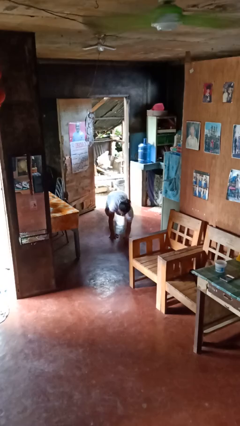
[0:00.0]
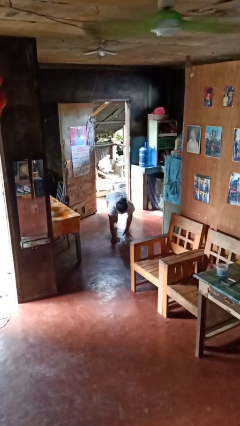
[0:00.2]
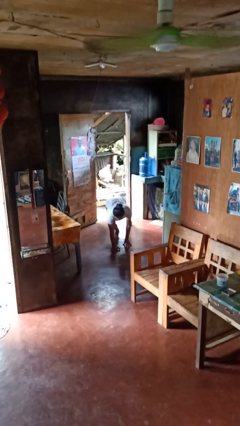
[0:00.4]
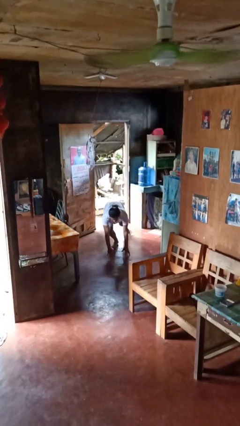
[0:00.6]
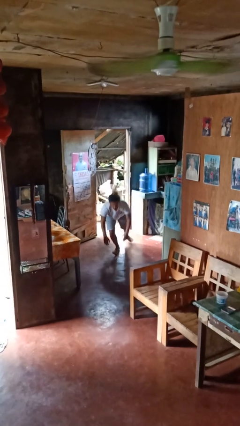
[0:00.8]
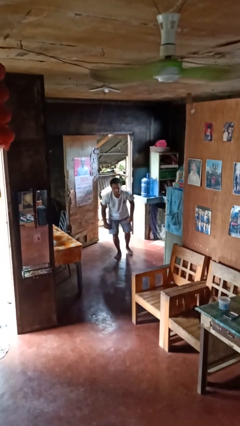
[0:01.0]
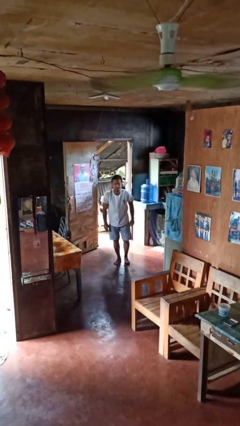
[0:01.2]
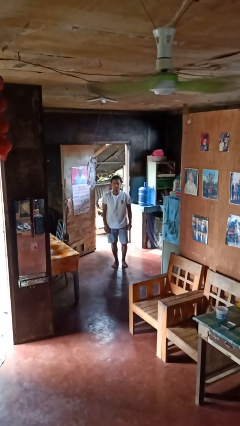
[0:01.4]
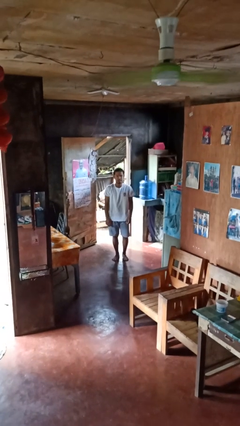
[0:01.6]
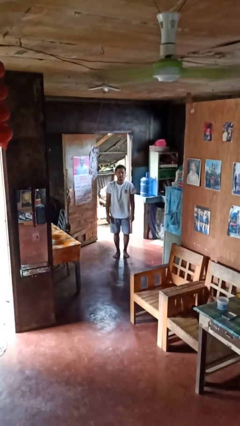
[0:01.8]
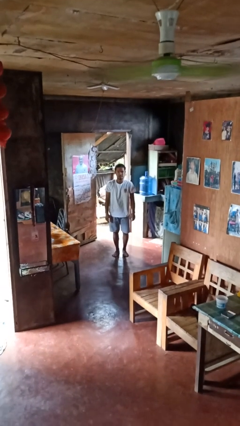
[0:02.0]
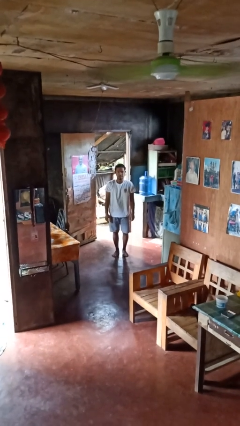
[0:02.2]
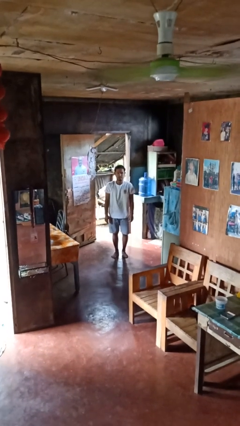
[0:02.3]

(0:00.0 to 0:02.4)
person stands up from floor

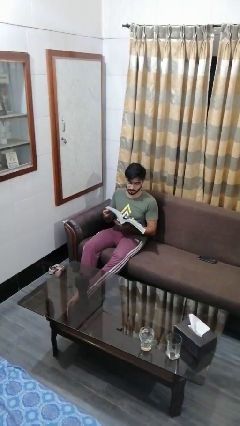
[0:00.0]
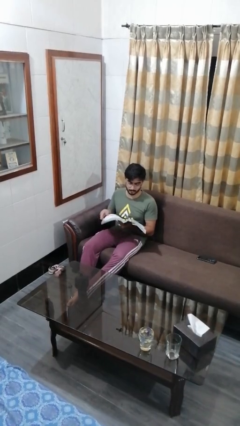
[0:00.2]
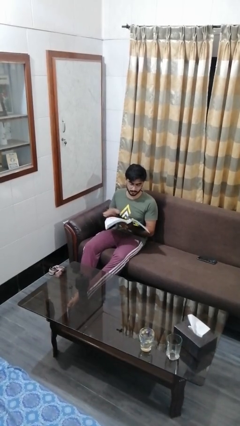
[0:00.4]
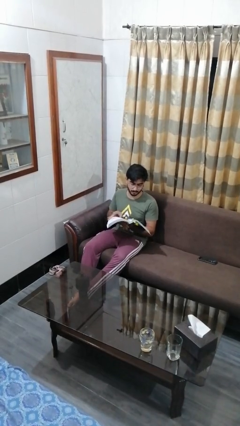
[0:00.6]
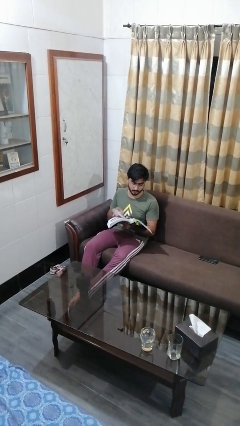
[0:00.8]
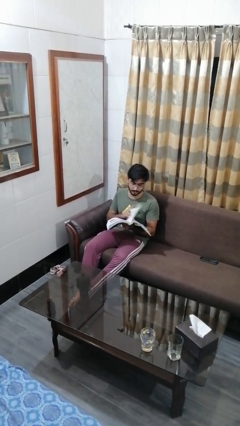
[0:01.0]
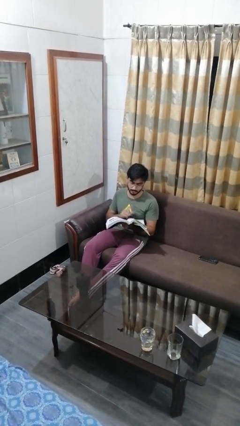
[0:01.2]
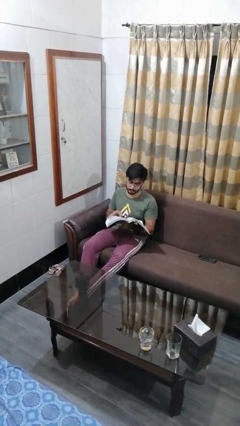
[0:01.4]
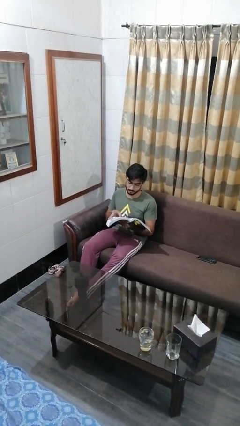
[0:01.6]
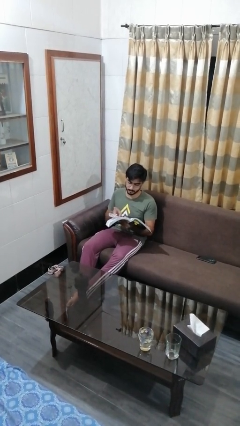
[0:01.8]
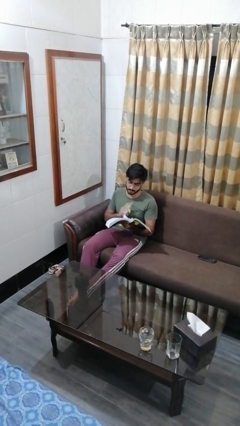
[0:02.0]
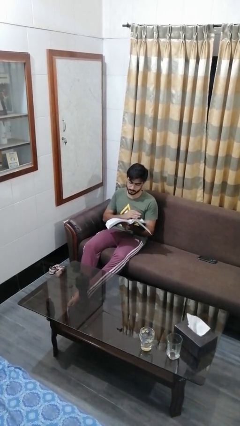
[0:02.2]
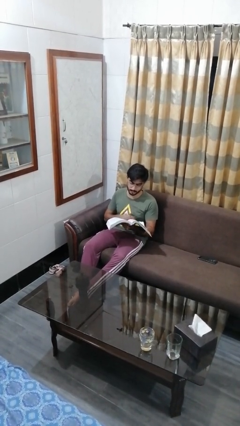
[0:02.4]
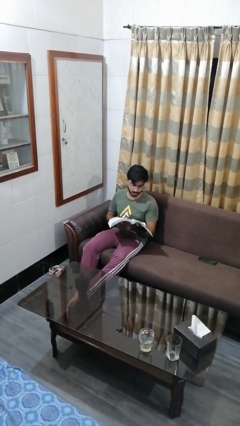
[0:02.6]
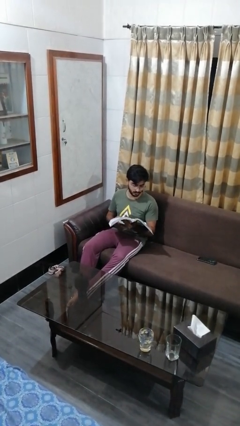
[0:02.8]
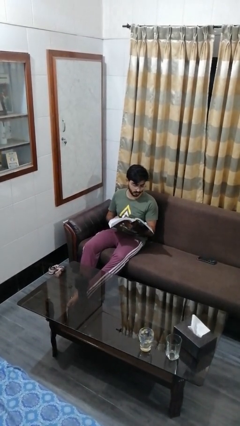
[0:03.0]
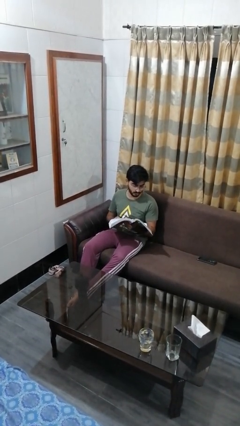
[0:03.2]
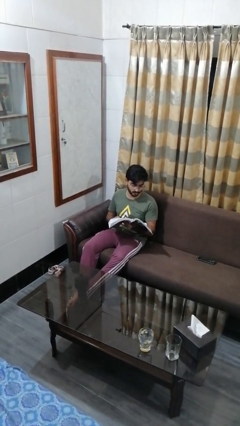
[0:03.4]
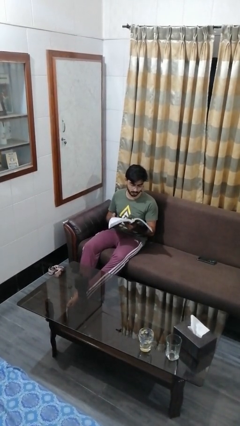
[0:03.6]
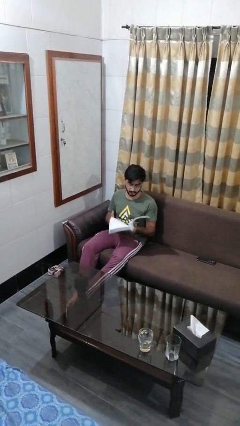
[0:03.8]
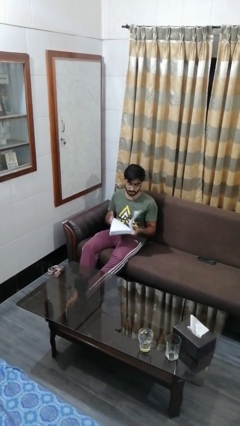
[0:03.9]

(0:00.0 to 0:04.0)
person reads book

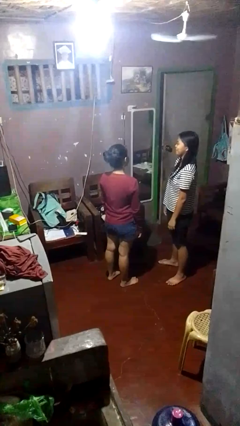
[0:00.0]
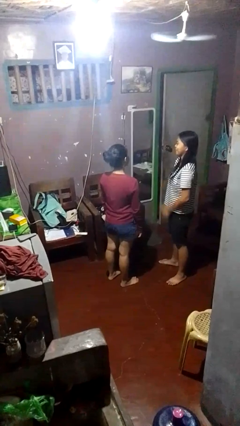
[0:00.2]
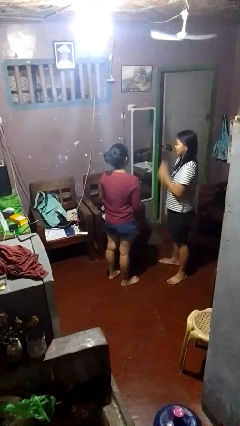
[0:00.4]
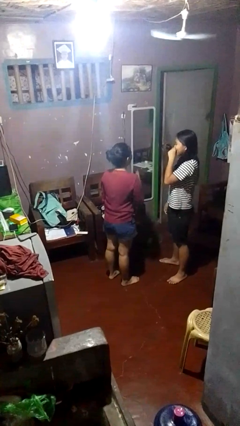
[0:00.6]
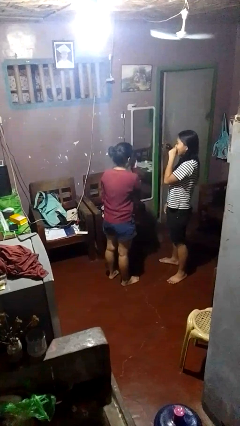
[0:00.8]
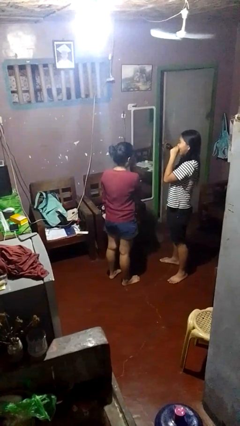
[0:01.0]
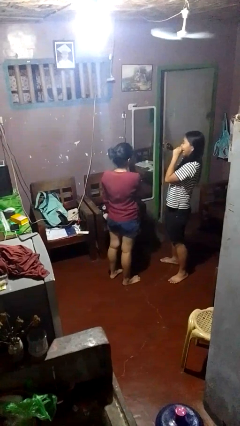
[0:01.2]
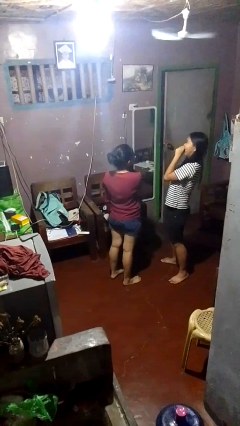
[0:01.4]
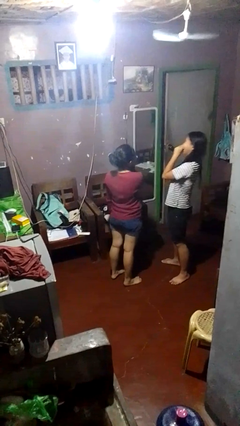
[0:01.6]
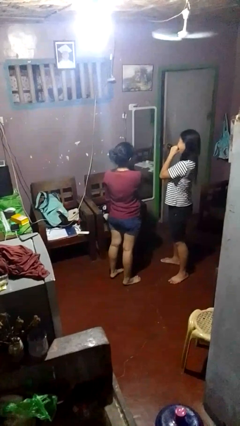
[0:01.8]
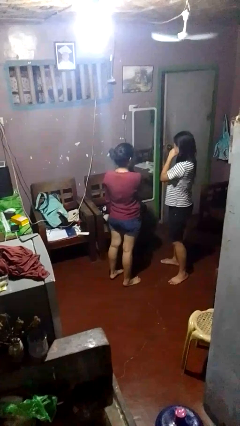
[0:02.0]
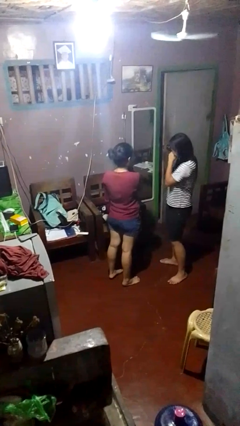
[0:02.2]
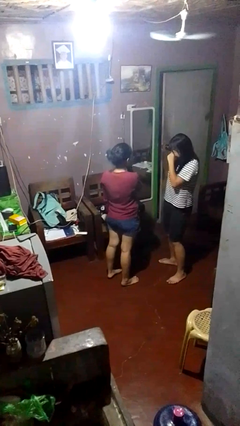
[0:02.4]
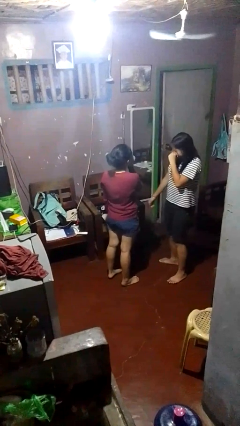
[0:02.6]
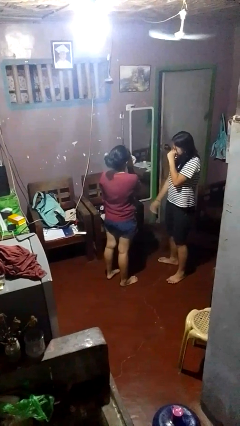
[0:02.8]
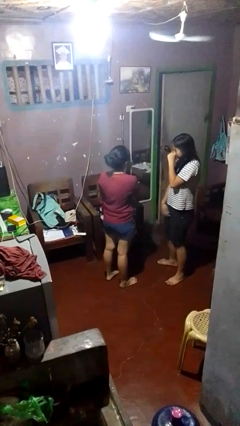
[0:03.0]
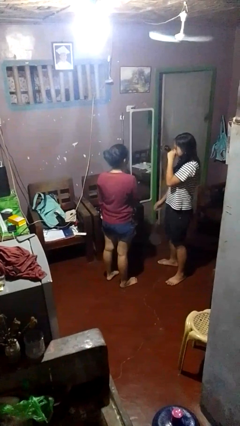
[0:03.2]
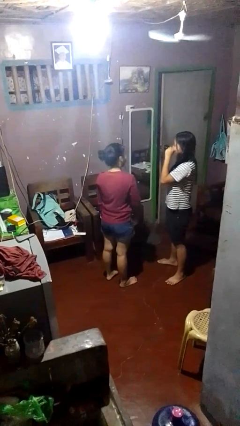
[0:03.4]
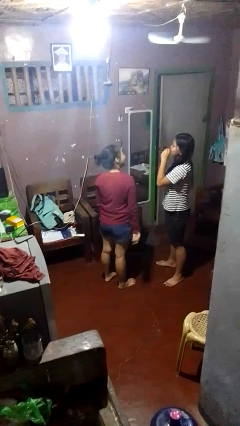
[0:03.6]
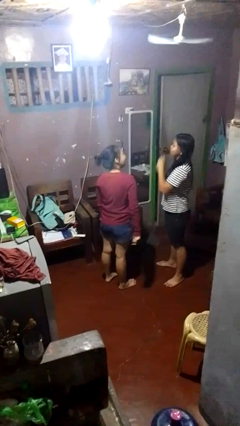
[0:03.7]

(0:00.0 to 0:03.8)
person laughs with person

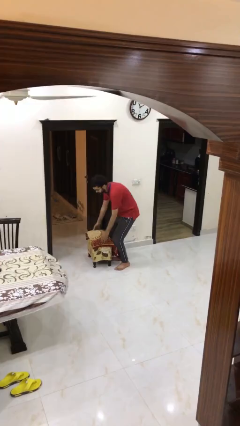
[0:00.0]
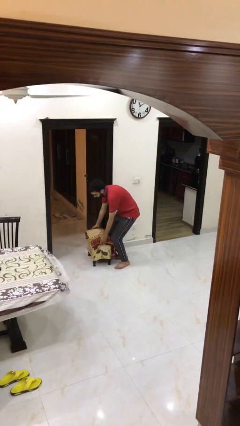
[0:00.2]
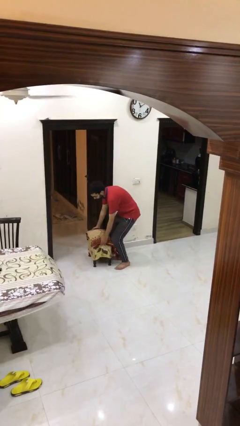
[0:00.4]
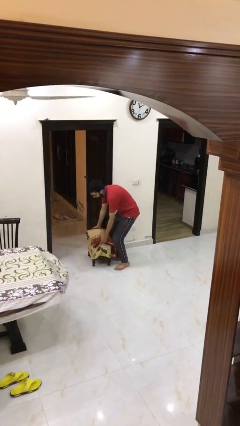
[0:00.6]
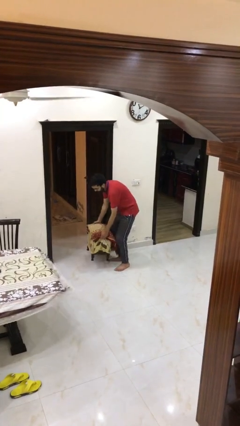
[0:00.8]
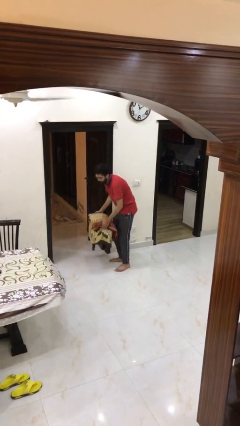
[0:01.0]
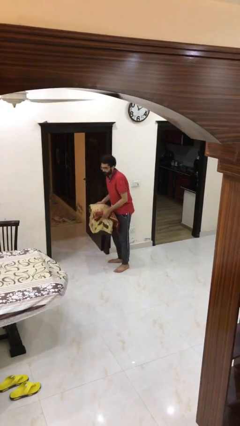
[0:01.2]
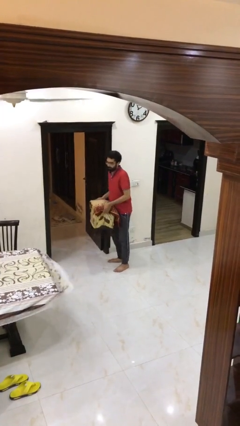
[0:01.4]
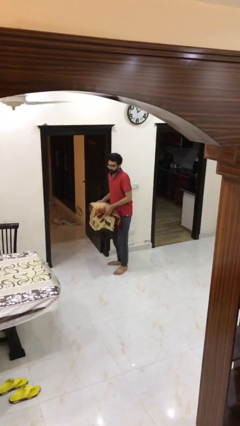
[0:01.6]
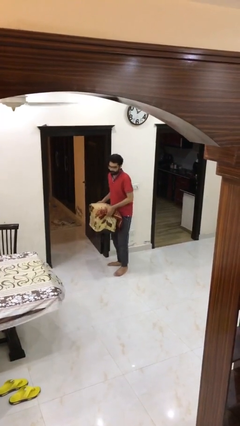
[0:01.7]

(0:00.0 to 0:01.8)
person picks up object from floor

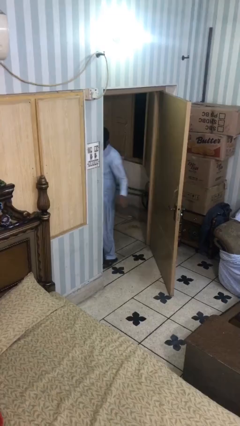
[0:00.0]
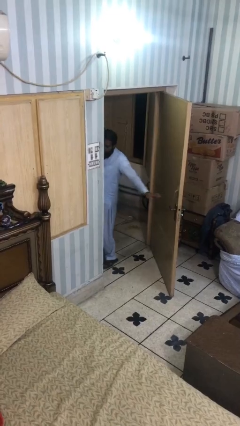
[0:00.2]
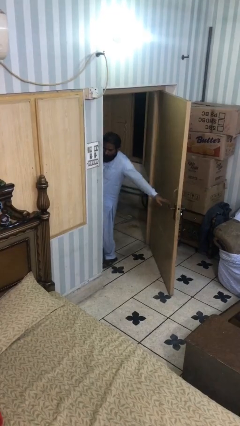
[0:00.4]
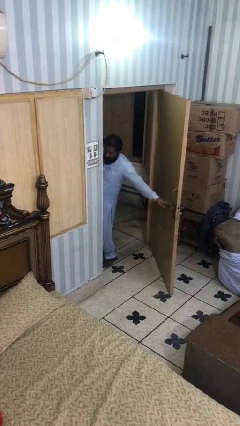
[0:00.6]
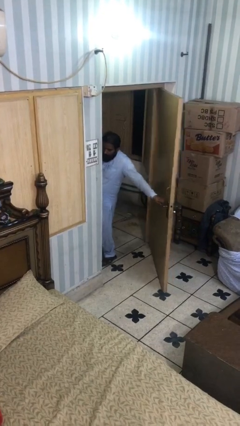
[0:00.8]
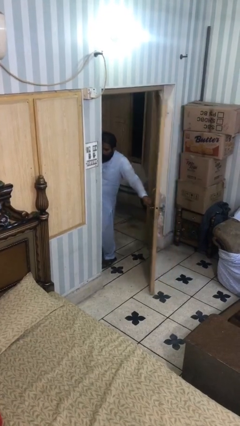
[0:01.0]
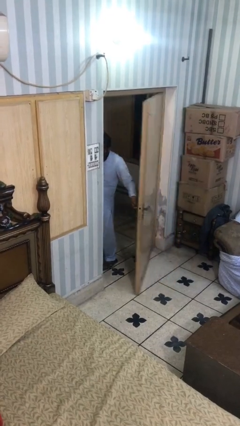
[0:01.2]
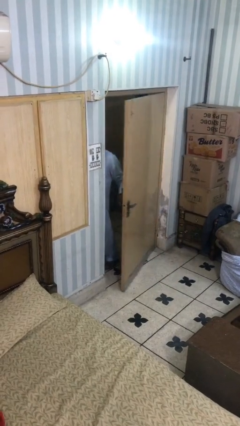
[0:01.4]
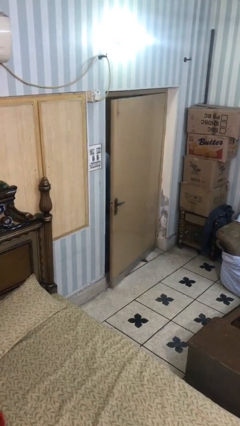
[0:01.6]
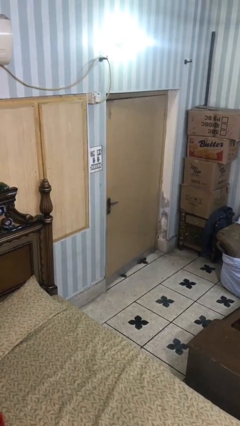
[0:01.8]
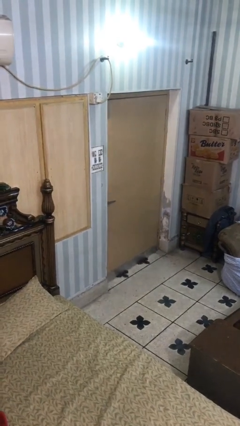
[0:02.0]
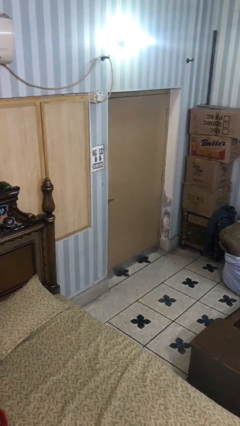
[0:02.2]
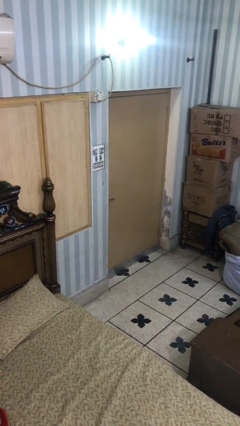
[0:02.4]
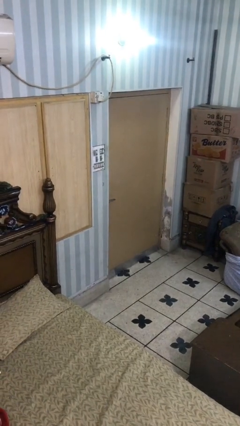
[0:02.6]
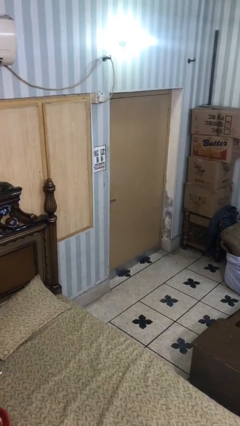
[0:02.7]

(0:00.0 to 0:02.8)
person closes facility door

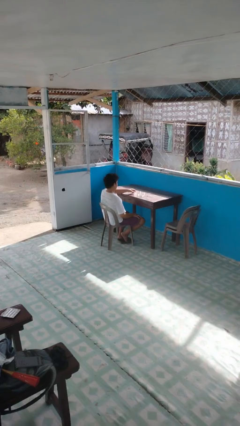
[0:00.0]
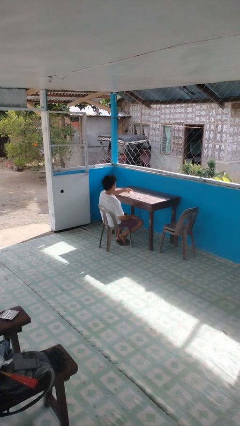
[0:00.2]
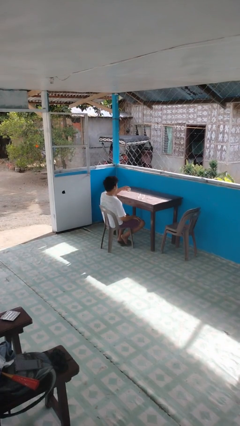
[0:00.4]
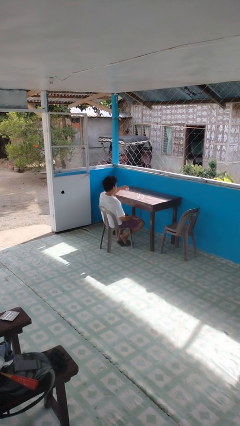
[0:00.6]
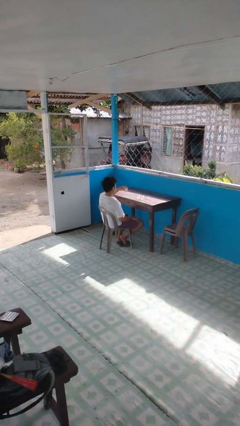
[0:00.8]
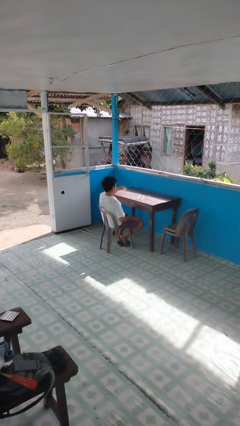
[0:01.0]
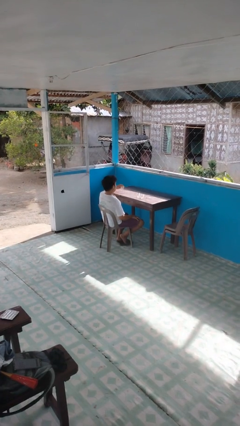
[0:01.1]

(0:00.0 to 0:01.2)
person picks up object from table

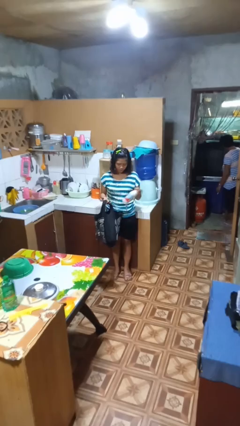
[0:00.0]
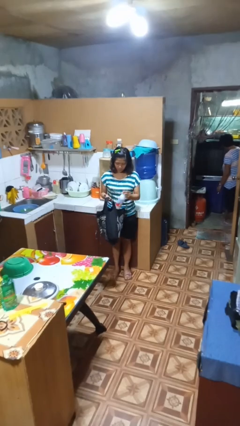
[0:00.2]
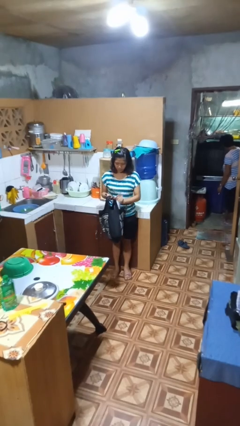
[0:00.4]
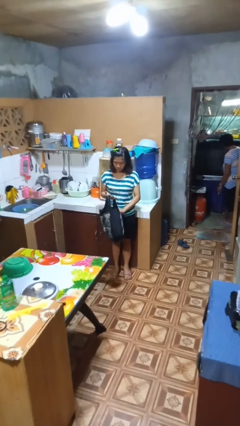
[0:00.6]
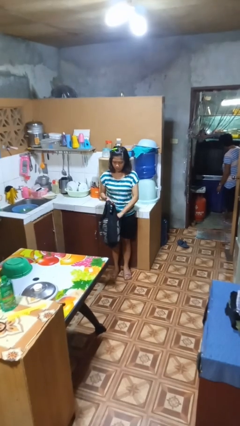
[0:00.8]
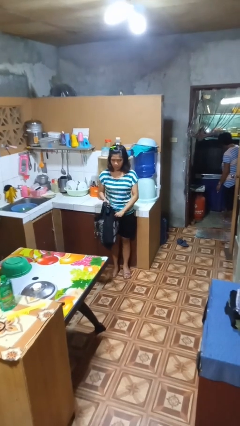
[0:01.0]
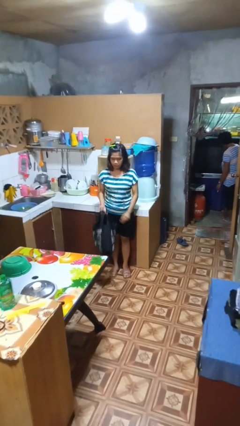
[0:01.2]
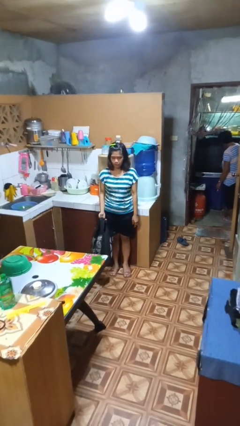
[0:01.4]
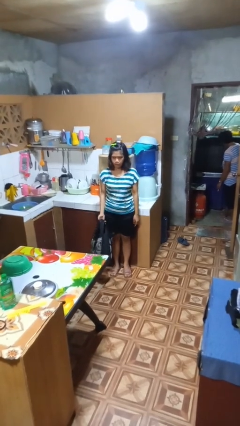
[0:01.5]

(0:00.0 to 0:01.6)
person puts object into bag
